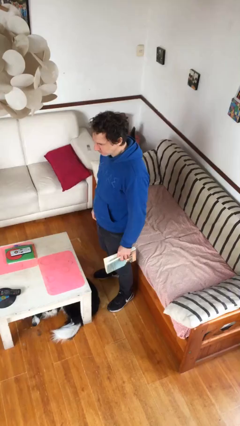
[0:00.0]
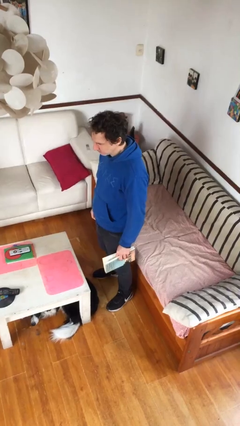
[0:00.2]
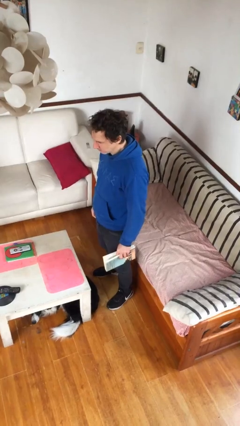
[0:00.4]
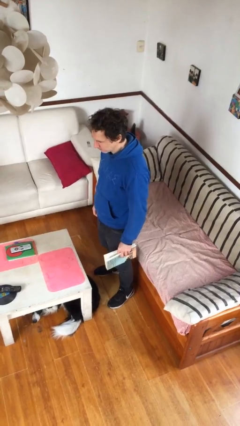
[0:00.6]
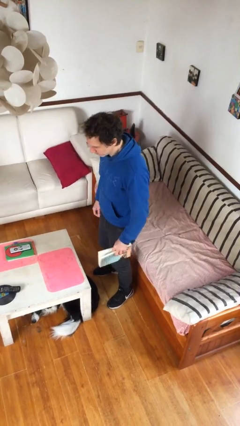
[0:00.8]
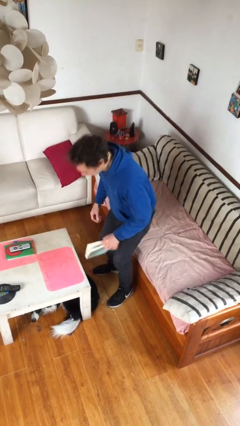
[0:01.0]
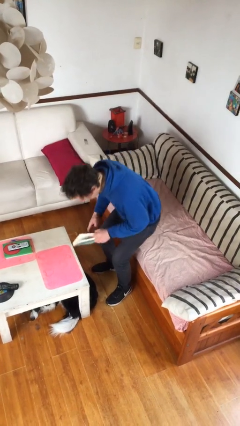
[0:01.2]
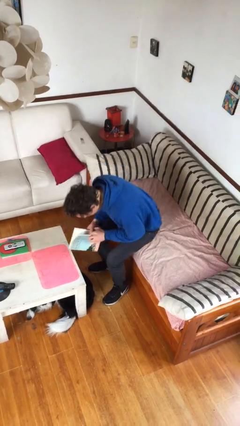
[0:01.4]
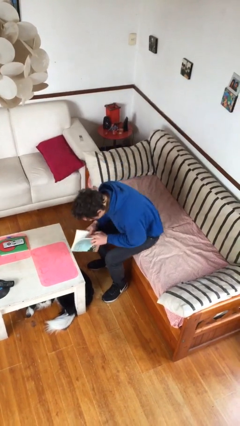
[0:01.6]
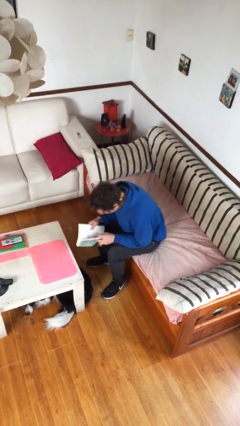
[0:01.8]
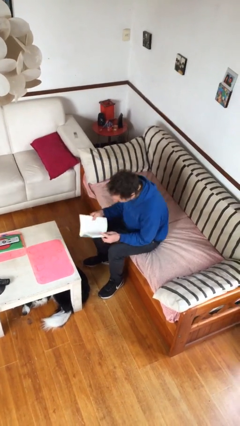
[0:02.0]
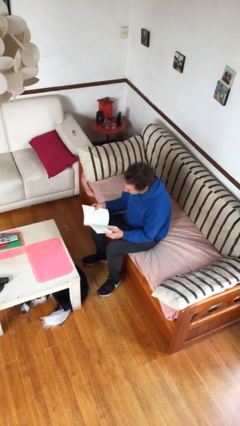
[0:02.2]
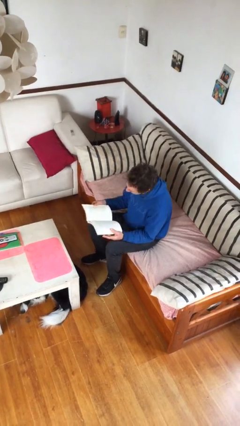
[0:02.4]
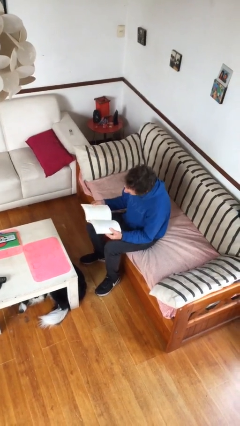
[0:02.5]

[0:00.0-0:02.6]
person sits down

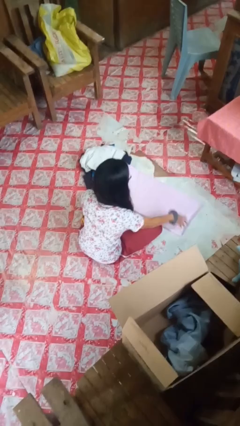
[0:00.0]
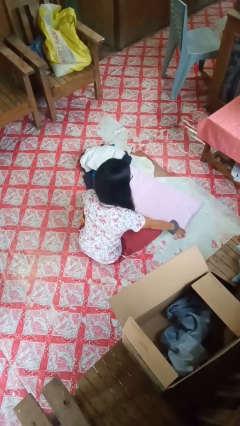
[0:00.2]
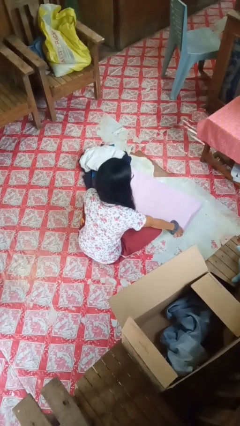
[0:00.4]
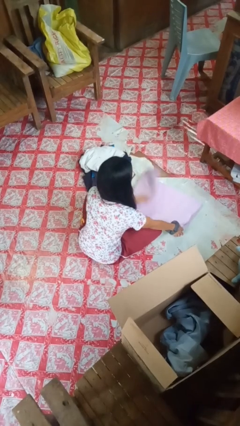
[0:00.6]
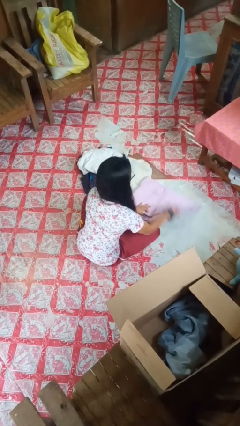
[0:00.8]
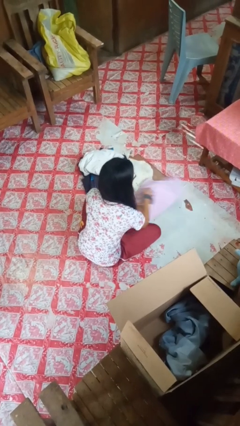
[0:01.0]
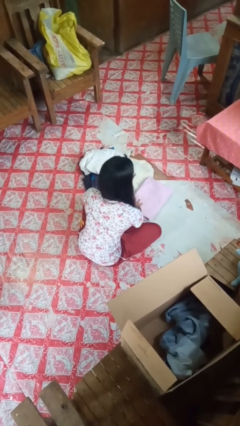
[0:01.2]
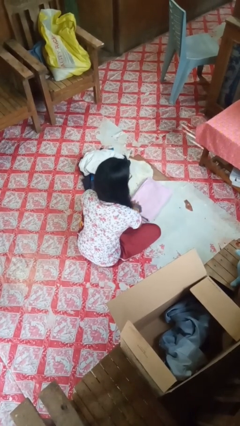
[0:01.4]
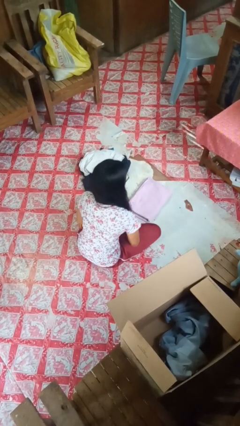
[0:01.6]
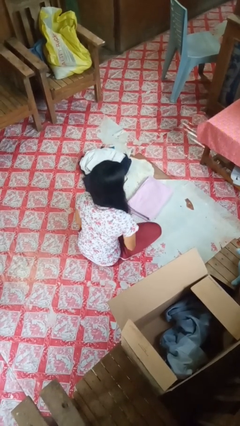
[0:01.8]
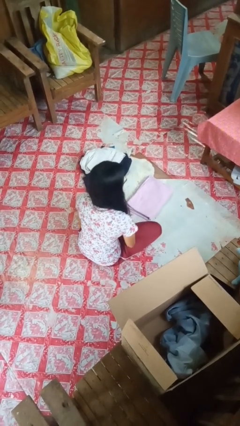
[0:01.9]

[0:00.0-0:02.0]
person folds towel

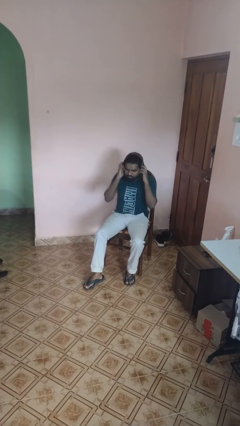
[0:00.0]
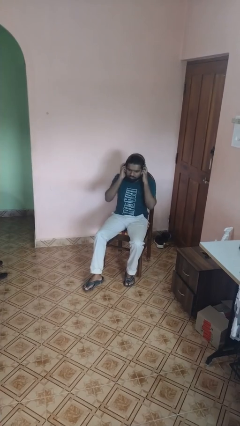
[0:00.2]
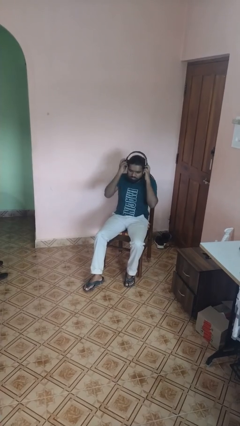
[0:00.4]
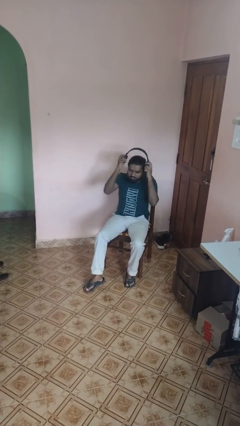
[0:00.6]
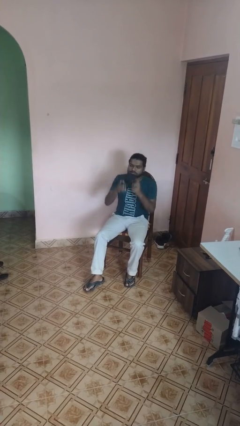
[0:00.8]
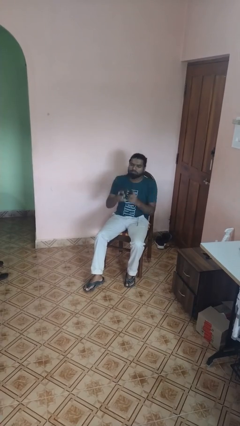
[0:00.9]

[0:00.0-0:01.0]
person takes off headphones

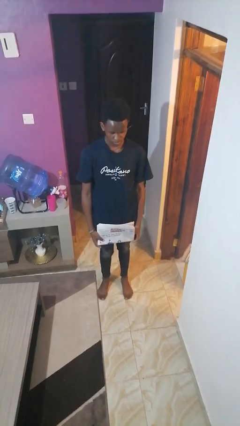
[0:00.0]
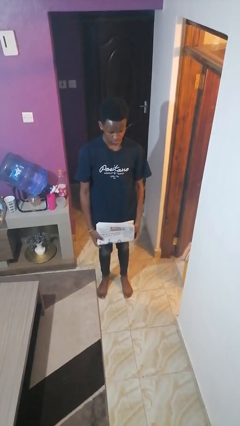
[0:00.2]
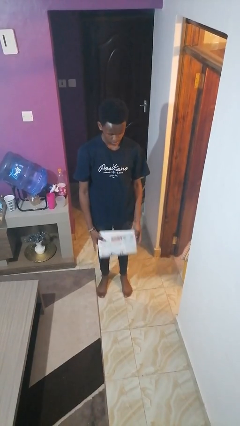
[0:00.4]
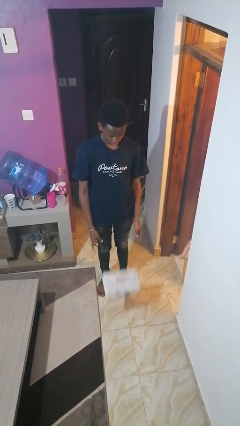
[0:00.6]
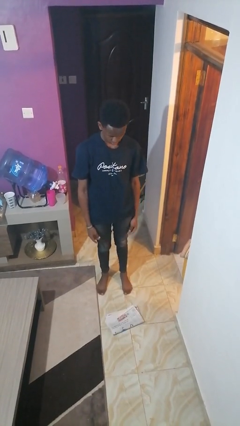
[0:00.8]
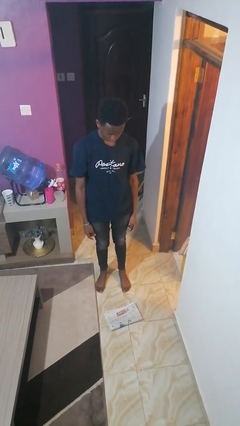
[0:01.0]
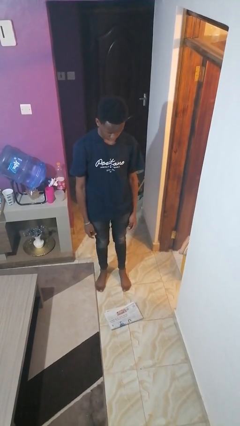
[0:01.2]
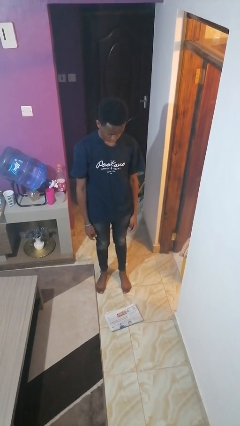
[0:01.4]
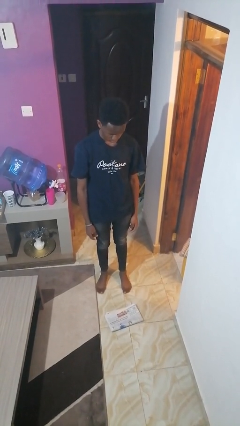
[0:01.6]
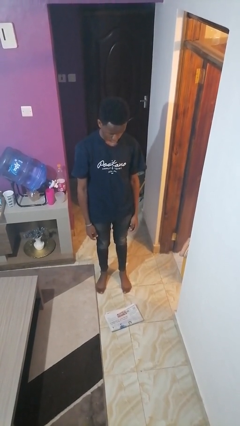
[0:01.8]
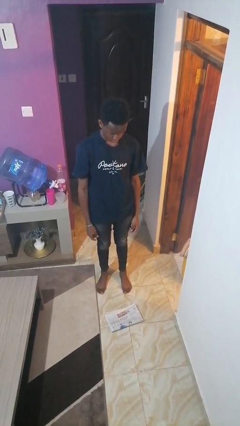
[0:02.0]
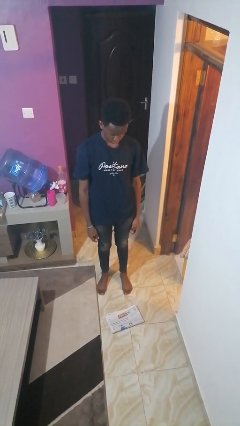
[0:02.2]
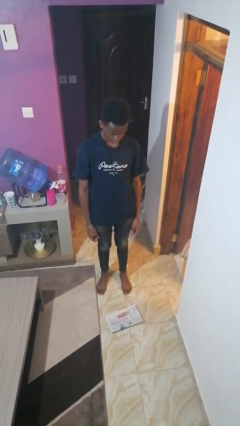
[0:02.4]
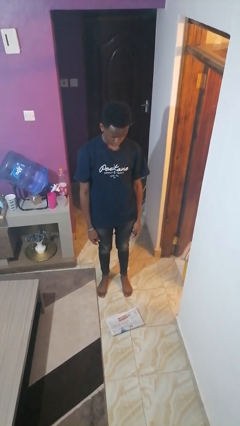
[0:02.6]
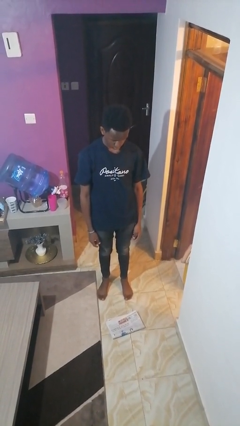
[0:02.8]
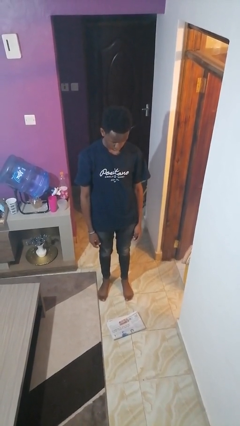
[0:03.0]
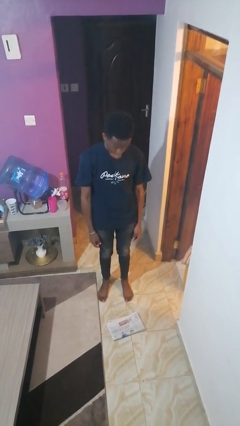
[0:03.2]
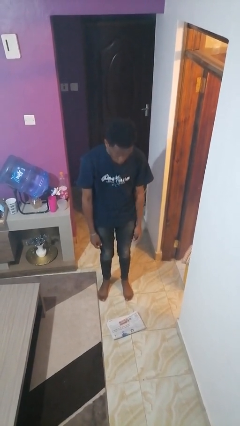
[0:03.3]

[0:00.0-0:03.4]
person drops object

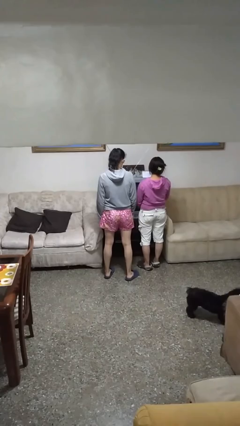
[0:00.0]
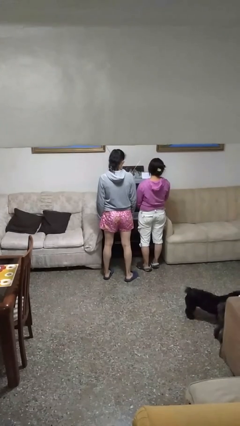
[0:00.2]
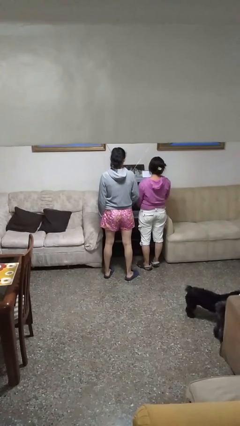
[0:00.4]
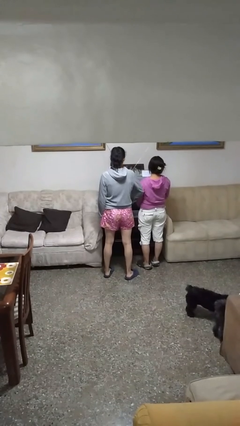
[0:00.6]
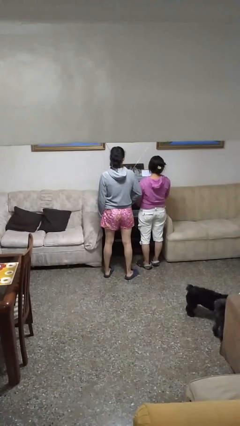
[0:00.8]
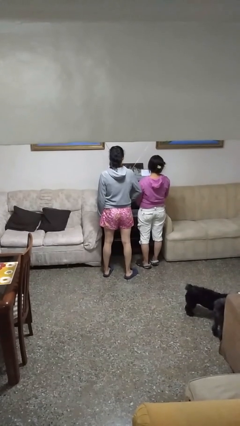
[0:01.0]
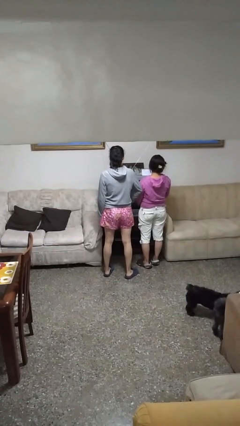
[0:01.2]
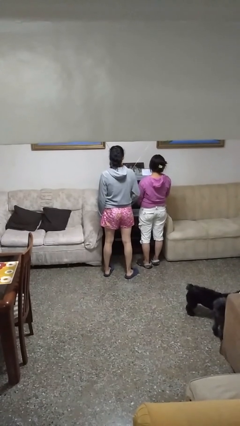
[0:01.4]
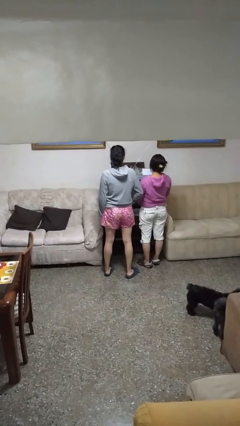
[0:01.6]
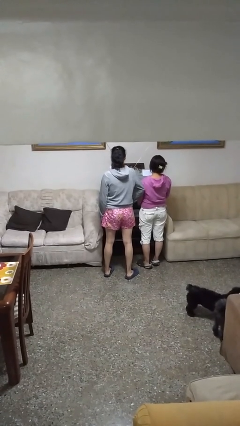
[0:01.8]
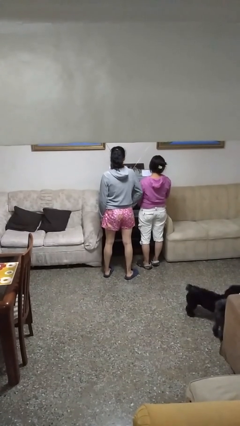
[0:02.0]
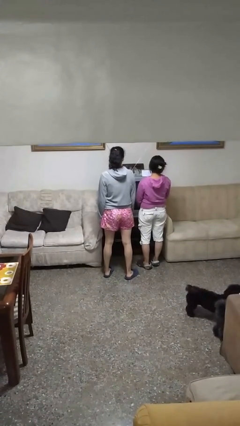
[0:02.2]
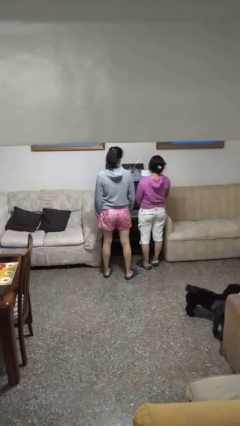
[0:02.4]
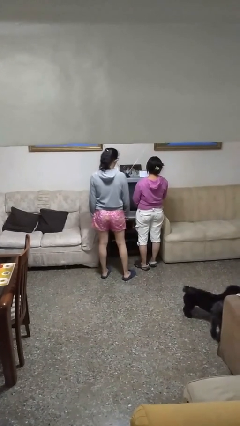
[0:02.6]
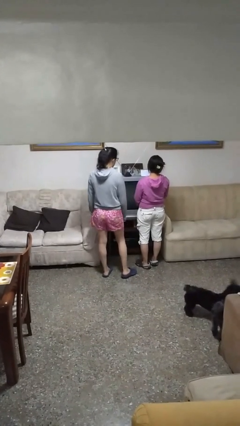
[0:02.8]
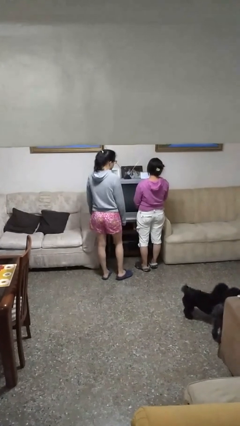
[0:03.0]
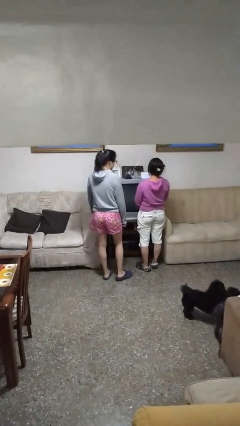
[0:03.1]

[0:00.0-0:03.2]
person nudges person with elbow

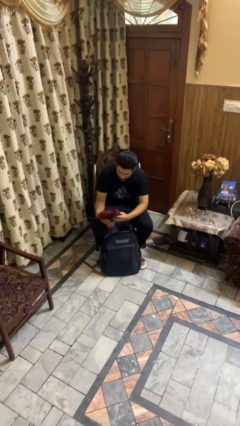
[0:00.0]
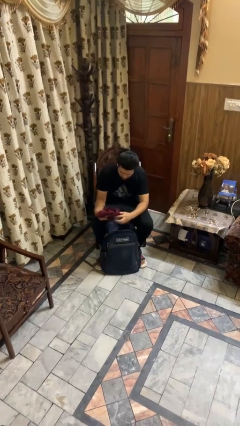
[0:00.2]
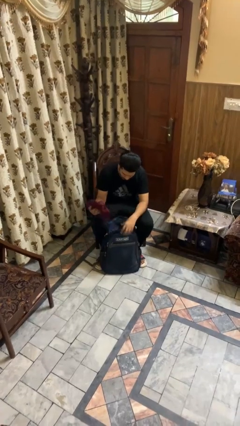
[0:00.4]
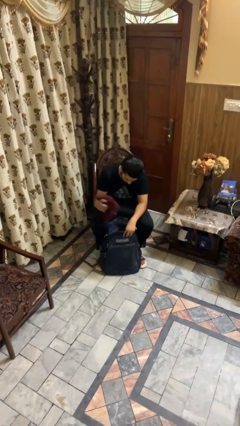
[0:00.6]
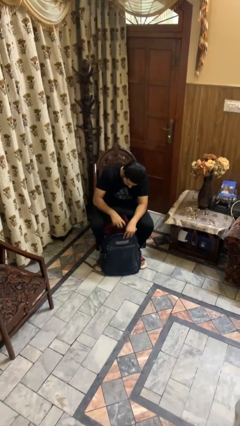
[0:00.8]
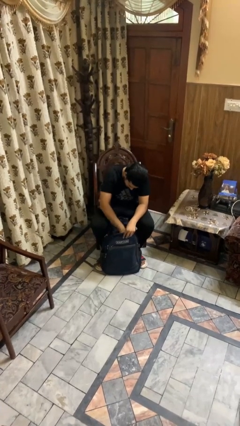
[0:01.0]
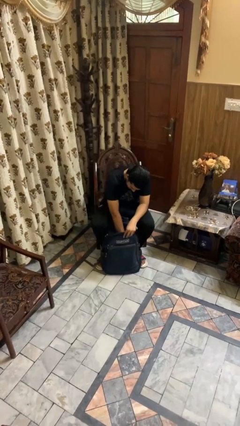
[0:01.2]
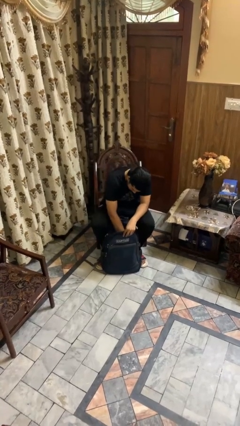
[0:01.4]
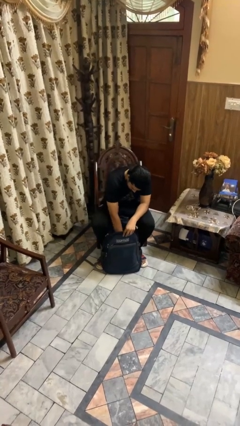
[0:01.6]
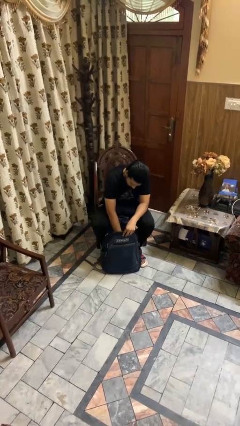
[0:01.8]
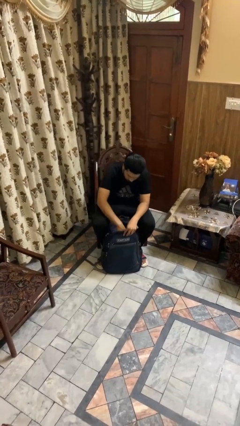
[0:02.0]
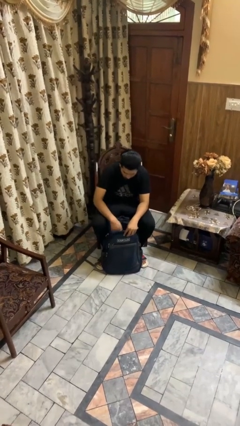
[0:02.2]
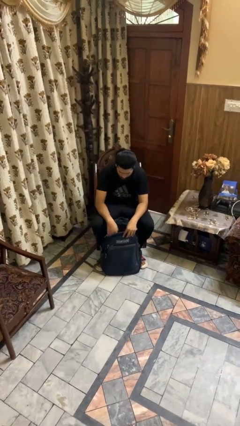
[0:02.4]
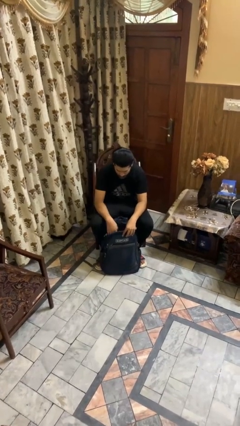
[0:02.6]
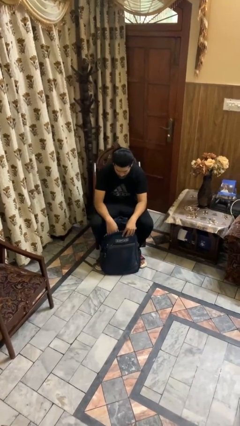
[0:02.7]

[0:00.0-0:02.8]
person puts object into backpack

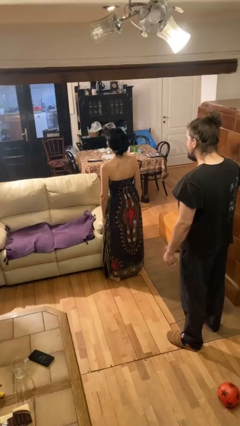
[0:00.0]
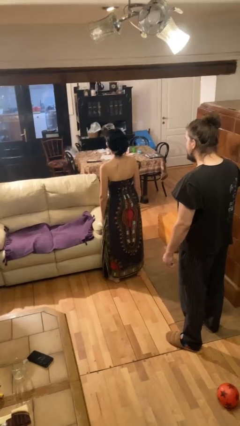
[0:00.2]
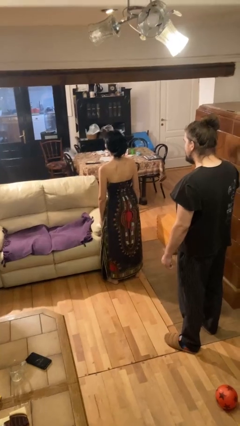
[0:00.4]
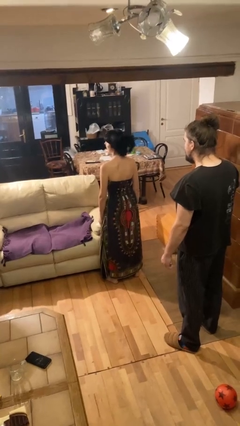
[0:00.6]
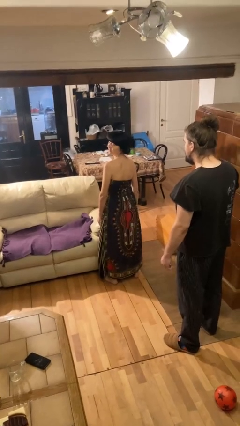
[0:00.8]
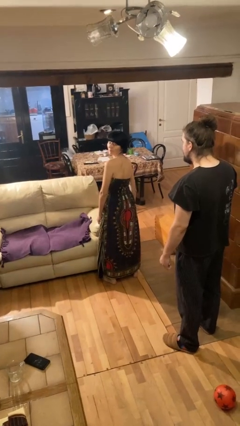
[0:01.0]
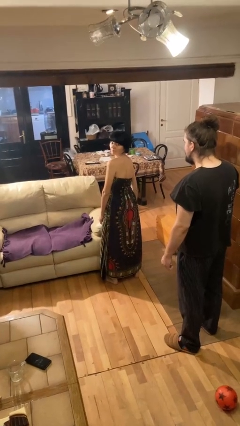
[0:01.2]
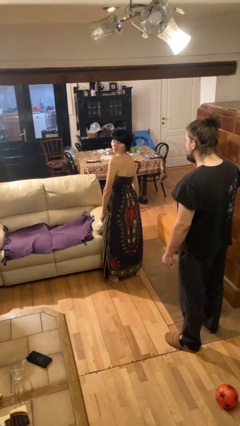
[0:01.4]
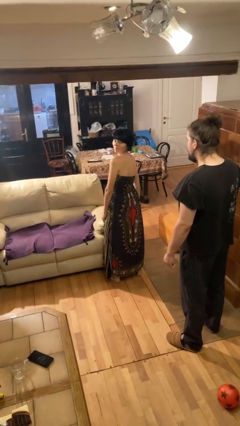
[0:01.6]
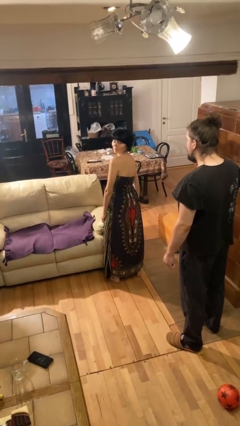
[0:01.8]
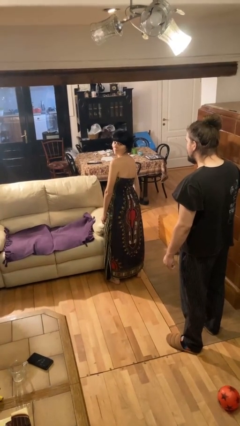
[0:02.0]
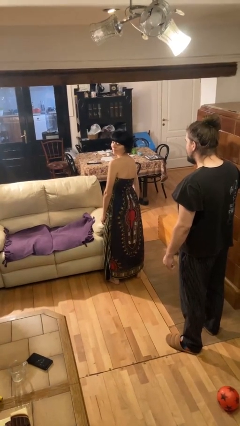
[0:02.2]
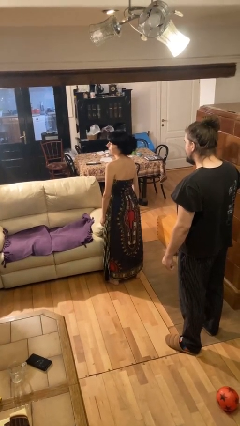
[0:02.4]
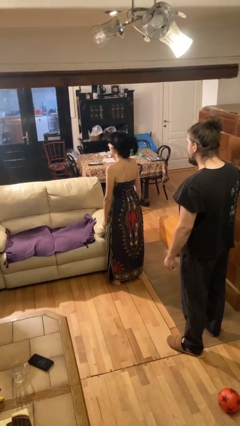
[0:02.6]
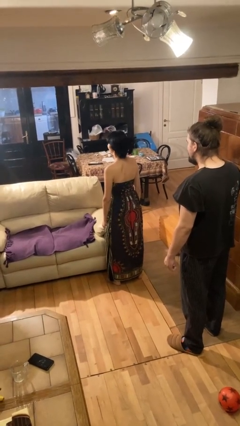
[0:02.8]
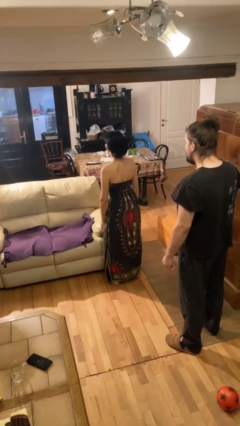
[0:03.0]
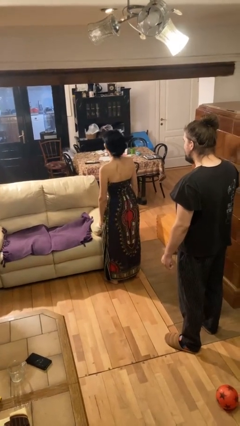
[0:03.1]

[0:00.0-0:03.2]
person looks over shoulder
